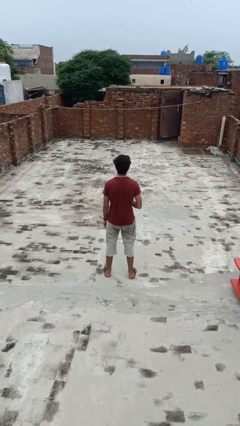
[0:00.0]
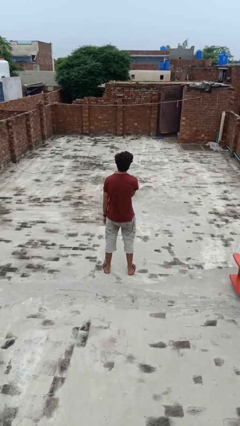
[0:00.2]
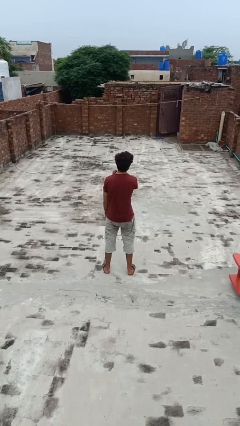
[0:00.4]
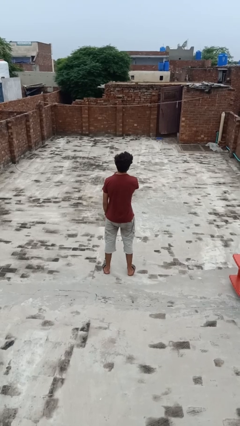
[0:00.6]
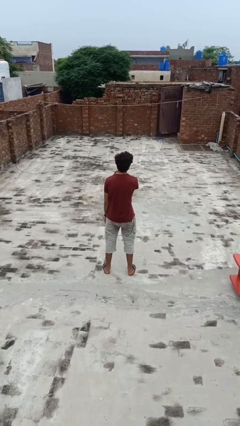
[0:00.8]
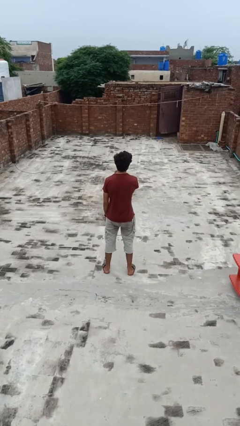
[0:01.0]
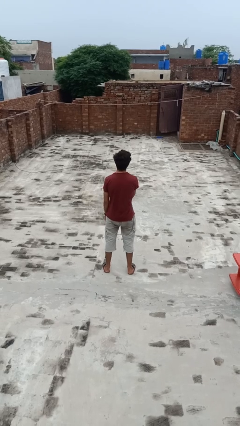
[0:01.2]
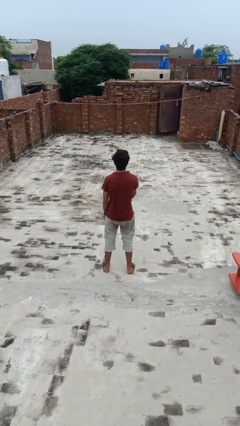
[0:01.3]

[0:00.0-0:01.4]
person strokes chin

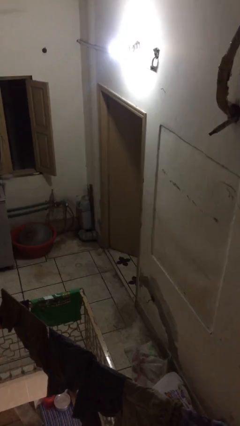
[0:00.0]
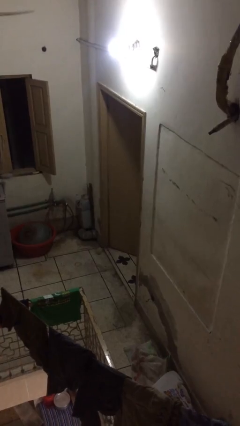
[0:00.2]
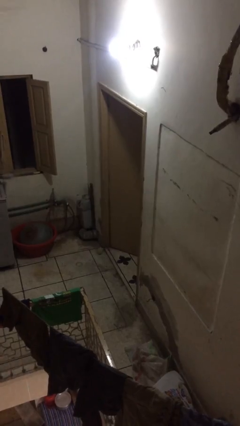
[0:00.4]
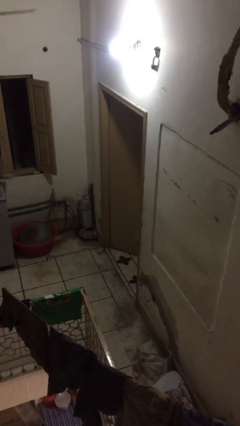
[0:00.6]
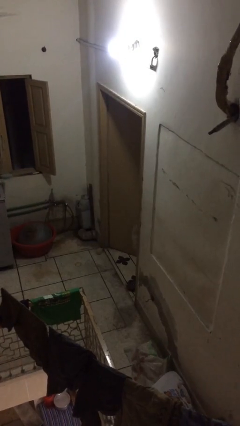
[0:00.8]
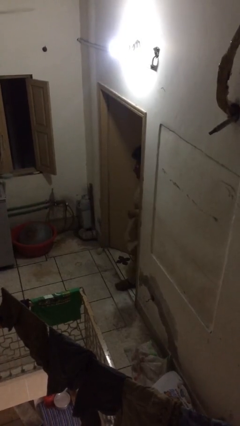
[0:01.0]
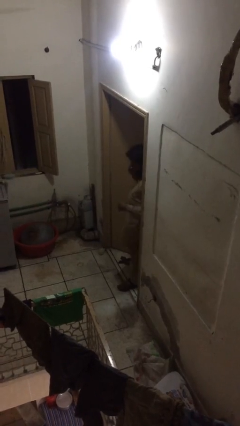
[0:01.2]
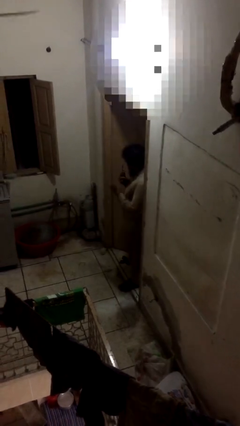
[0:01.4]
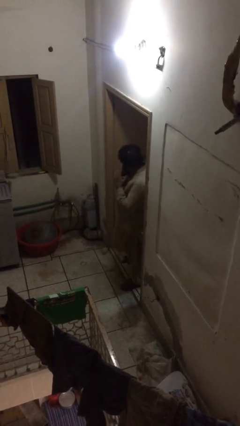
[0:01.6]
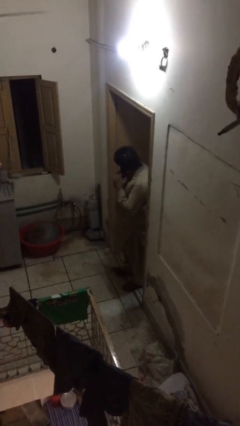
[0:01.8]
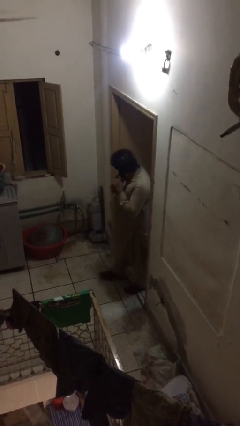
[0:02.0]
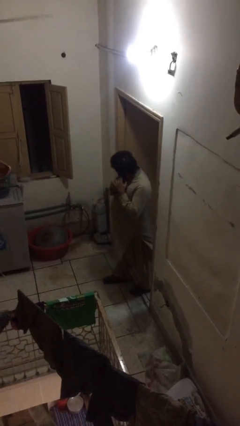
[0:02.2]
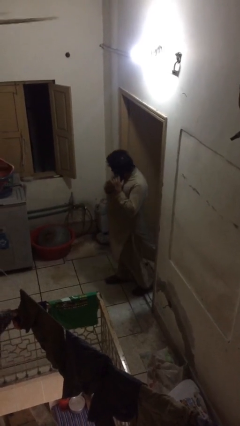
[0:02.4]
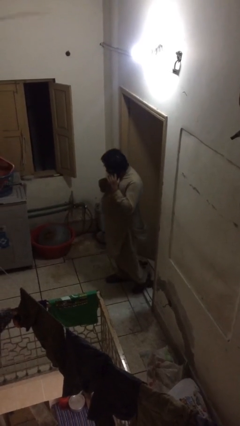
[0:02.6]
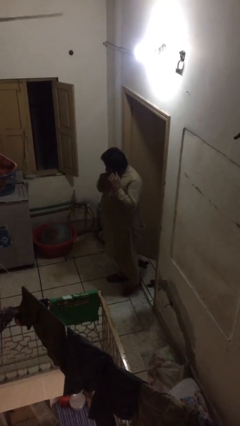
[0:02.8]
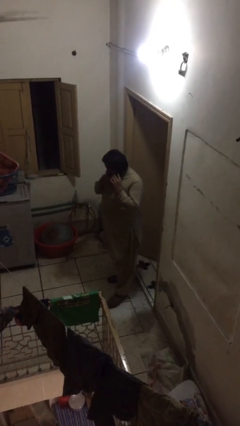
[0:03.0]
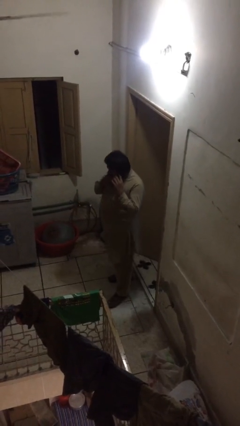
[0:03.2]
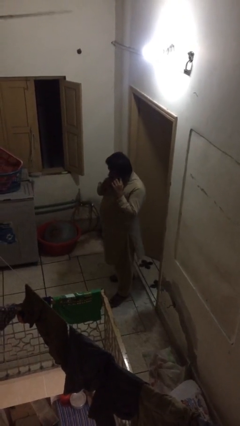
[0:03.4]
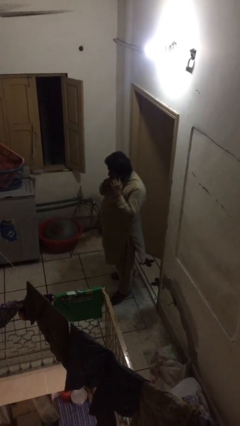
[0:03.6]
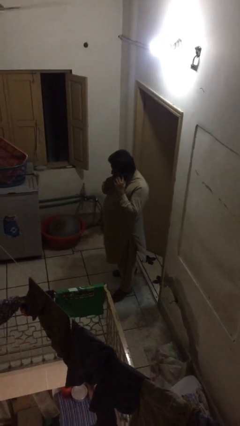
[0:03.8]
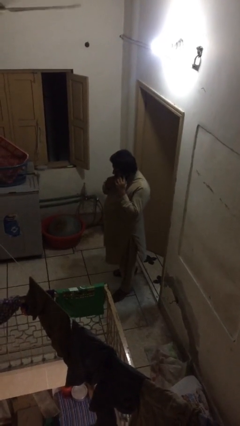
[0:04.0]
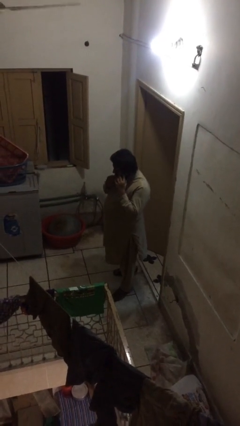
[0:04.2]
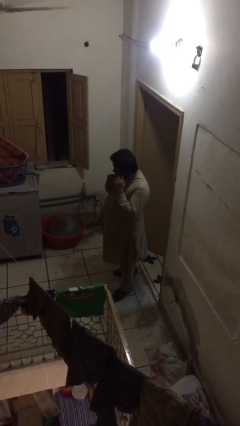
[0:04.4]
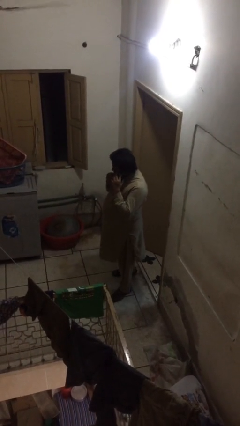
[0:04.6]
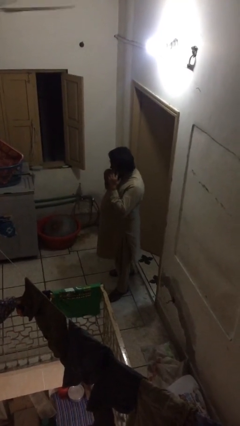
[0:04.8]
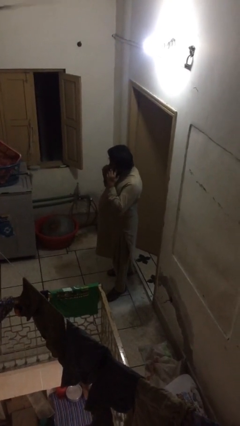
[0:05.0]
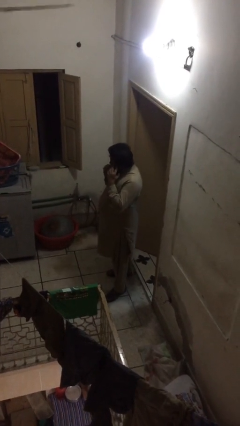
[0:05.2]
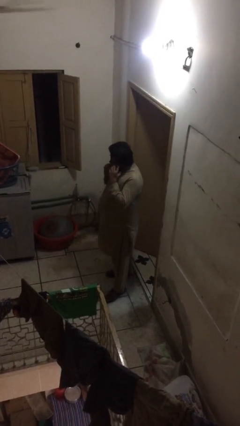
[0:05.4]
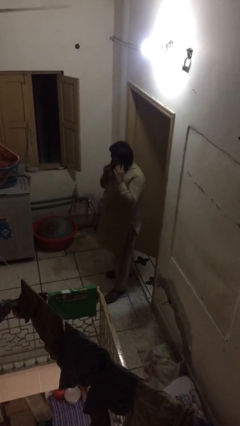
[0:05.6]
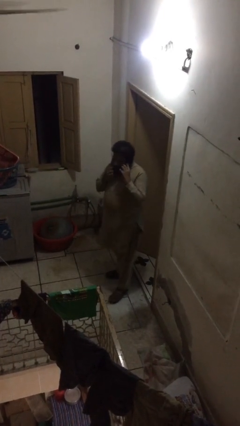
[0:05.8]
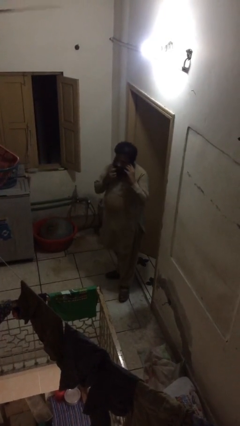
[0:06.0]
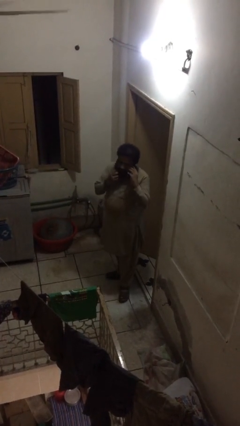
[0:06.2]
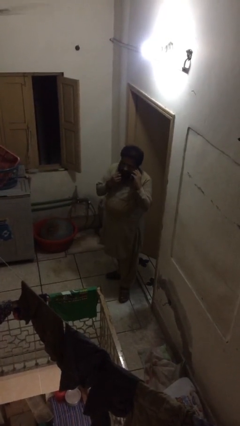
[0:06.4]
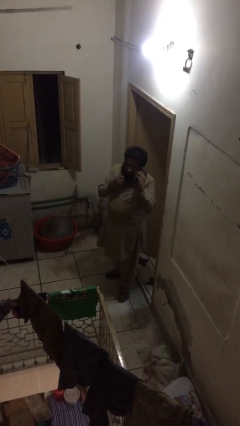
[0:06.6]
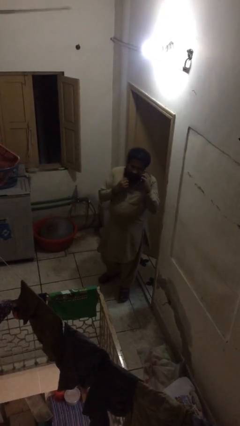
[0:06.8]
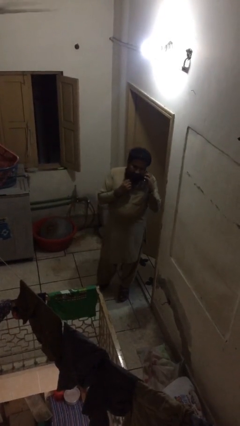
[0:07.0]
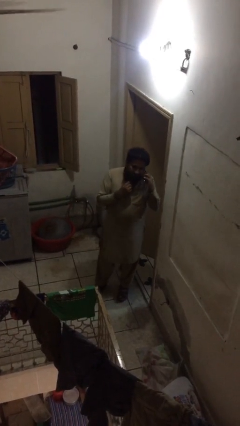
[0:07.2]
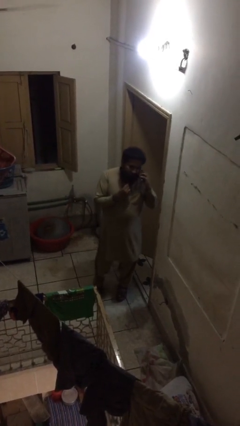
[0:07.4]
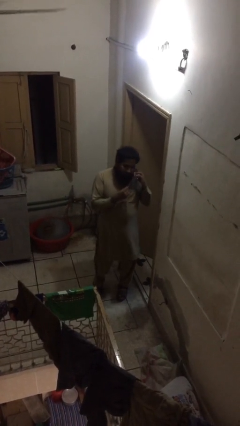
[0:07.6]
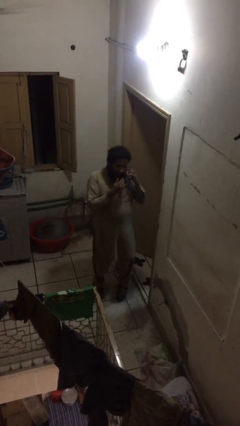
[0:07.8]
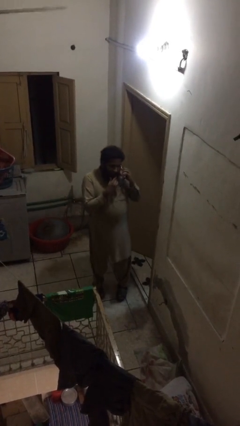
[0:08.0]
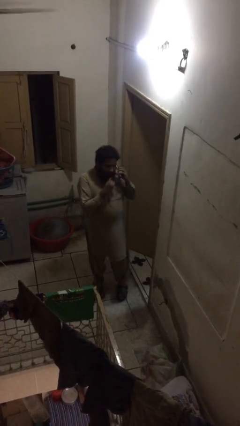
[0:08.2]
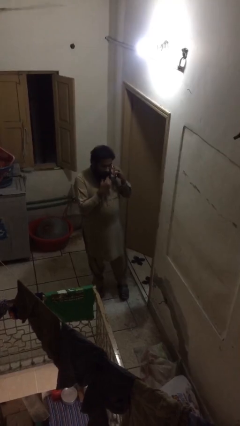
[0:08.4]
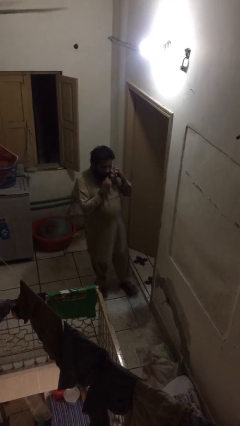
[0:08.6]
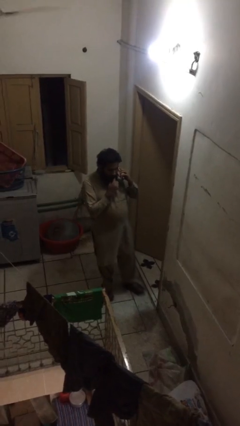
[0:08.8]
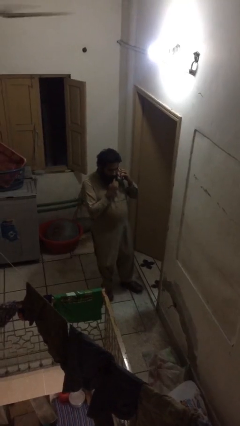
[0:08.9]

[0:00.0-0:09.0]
person enters scene through structure

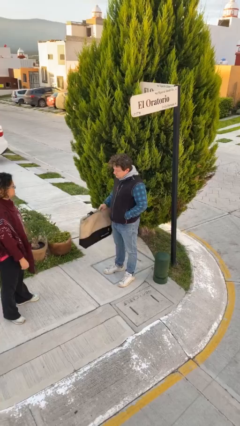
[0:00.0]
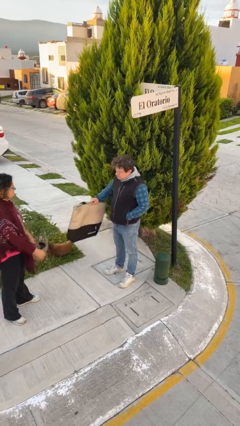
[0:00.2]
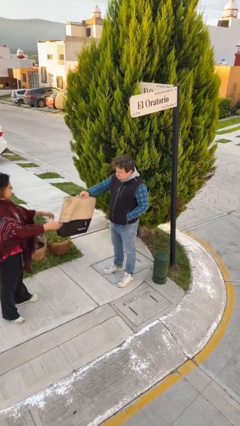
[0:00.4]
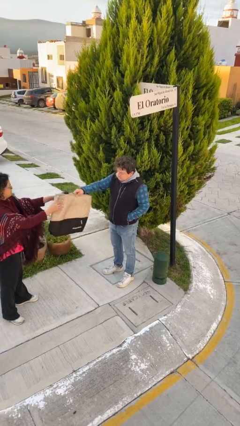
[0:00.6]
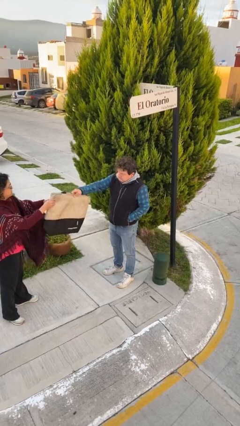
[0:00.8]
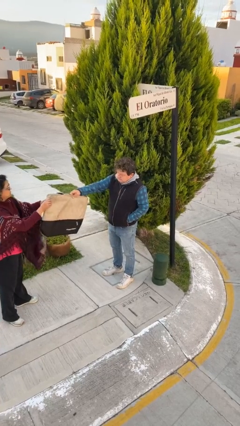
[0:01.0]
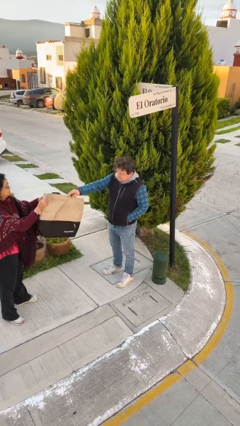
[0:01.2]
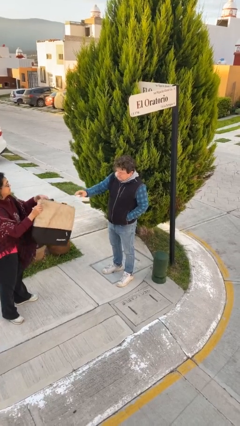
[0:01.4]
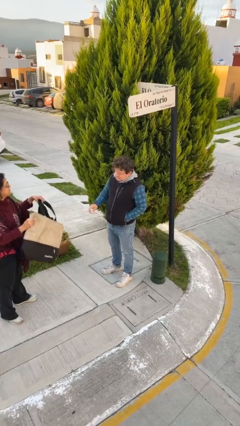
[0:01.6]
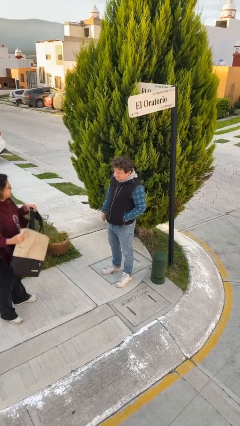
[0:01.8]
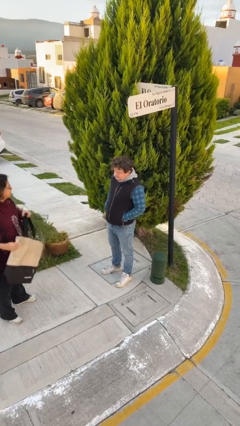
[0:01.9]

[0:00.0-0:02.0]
person transfers object to person

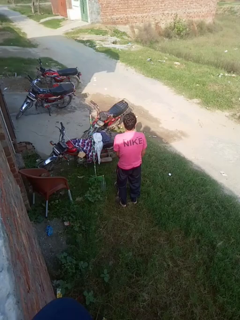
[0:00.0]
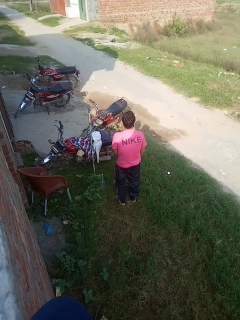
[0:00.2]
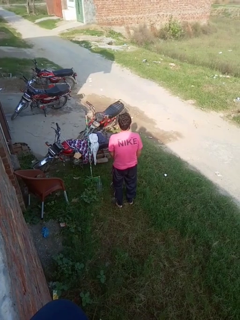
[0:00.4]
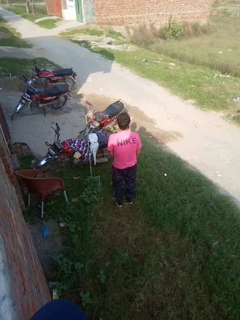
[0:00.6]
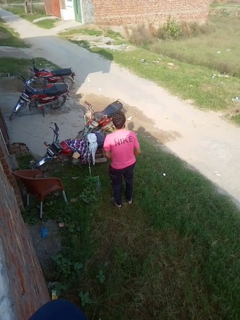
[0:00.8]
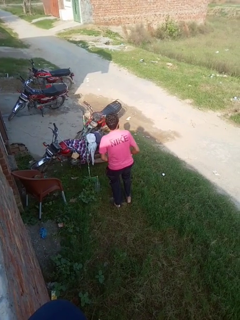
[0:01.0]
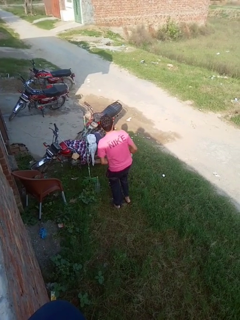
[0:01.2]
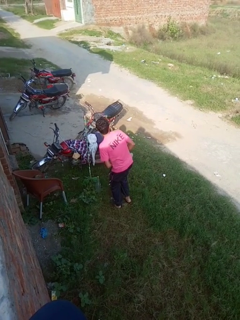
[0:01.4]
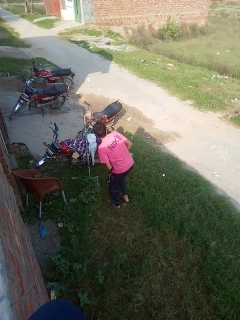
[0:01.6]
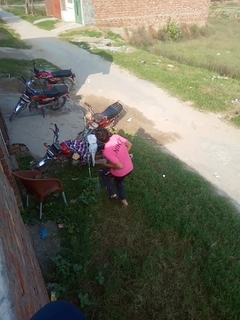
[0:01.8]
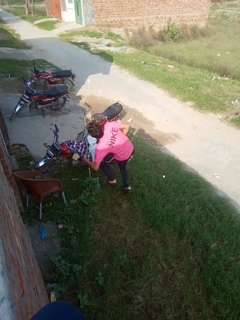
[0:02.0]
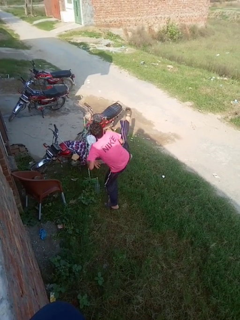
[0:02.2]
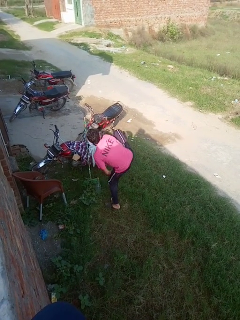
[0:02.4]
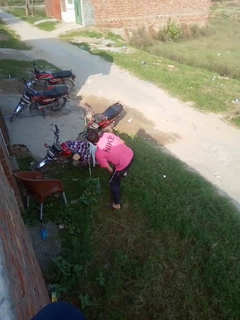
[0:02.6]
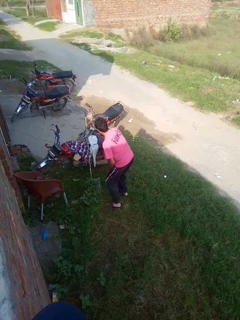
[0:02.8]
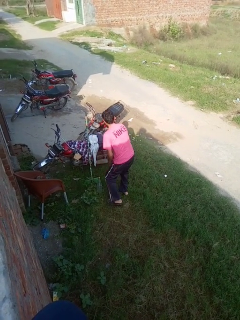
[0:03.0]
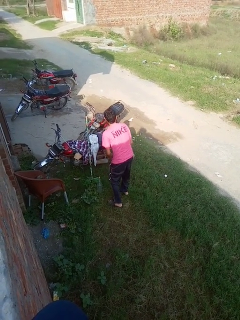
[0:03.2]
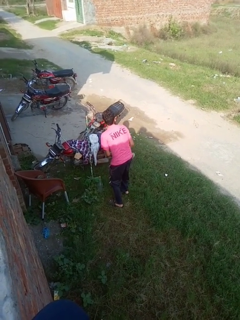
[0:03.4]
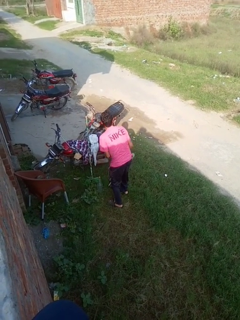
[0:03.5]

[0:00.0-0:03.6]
person karate kicks

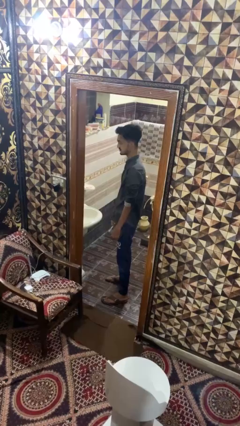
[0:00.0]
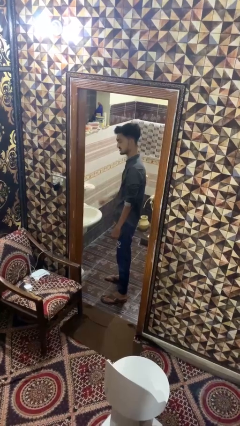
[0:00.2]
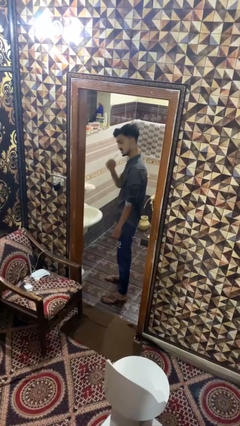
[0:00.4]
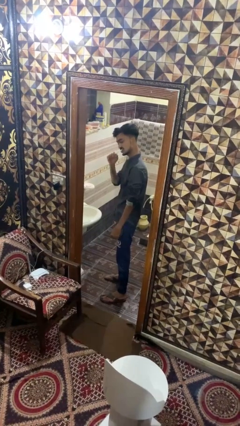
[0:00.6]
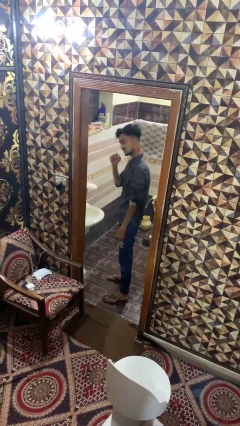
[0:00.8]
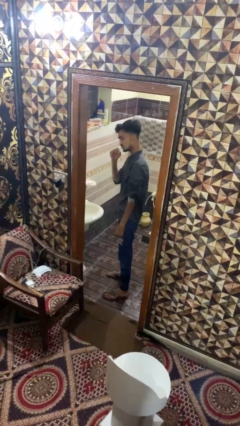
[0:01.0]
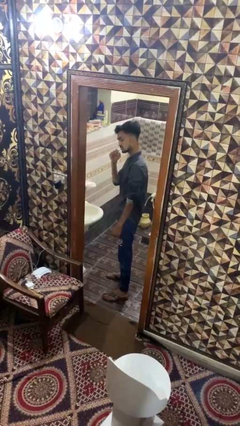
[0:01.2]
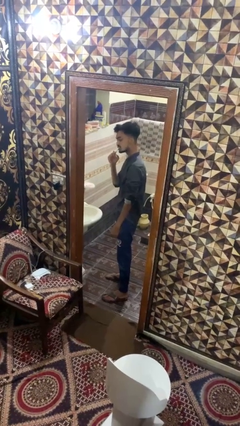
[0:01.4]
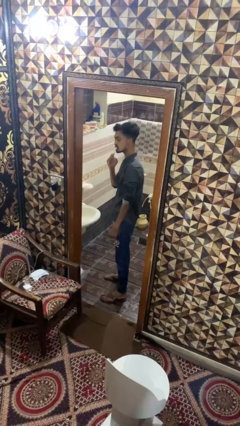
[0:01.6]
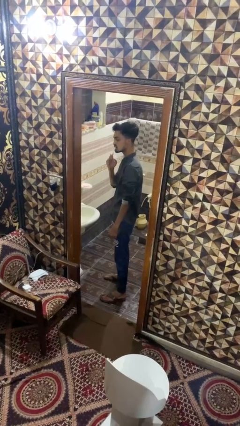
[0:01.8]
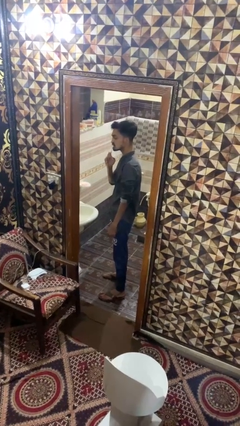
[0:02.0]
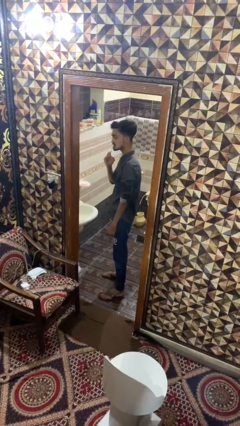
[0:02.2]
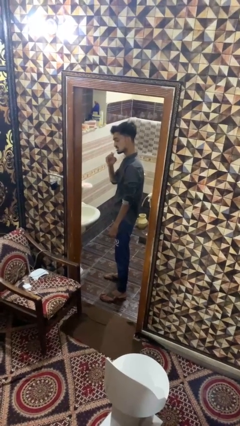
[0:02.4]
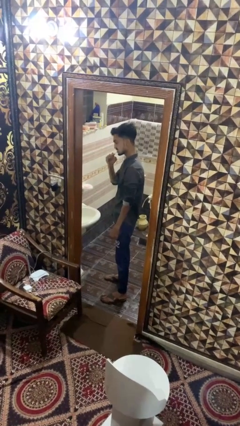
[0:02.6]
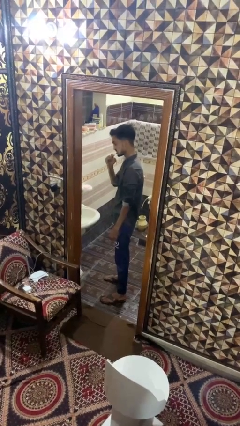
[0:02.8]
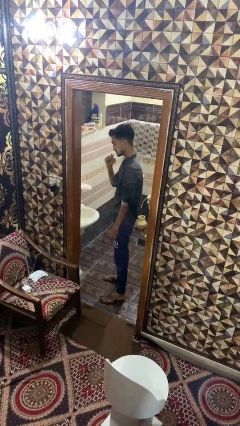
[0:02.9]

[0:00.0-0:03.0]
person brushes teeth
